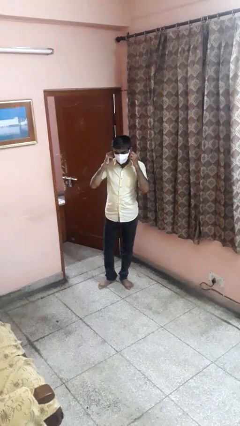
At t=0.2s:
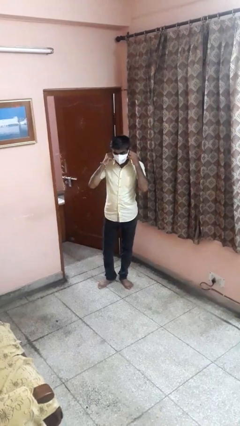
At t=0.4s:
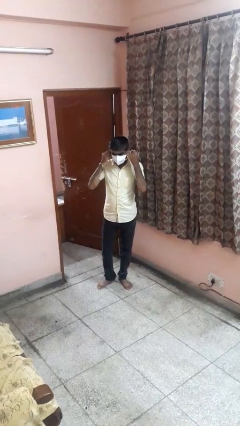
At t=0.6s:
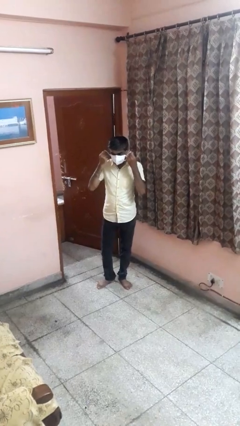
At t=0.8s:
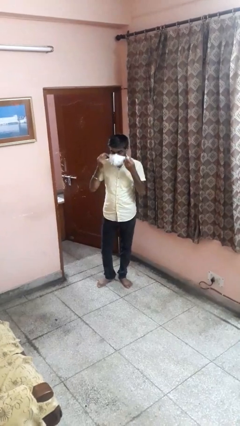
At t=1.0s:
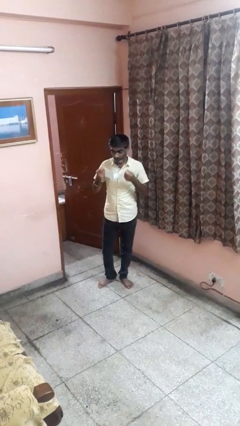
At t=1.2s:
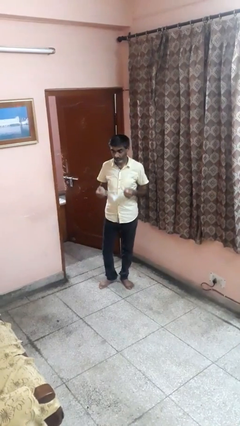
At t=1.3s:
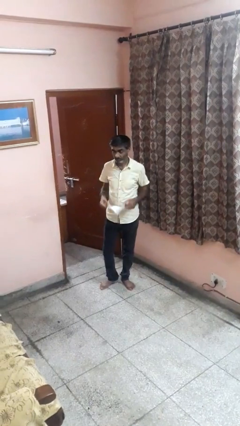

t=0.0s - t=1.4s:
person takes off facemask

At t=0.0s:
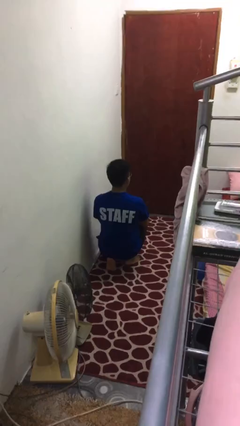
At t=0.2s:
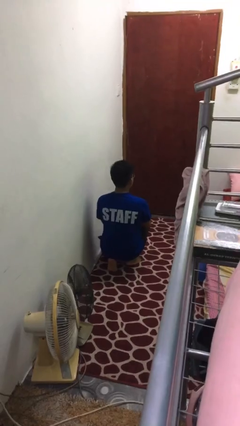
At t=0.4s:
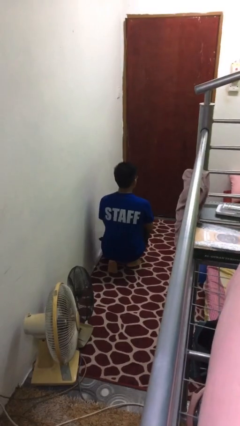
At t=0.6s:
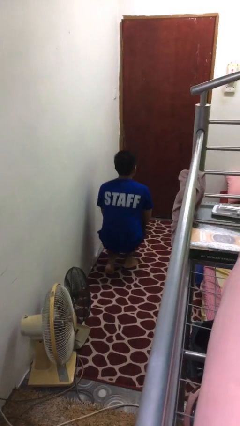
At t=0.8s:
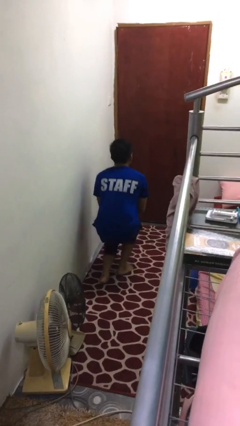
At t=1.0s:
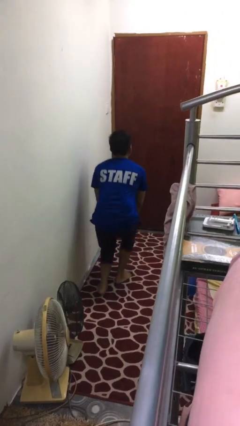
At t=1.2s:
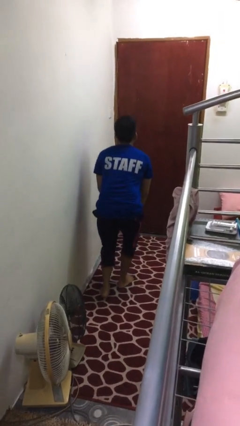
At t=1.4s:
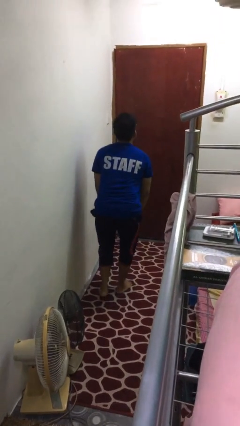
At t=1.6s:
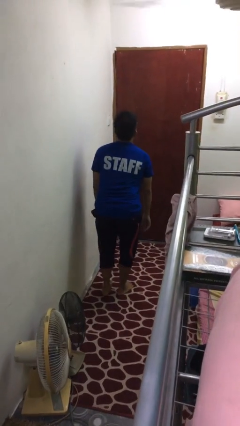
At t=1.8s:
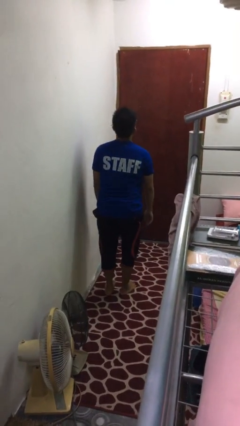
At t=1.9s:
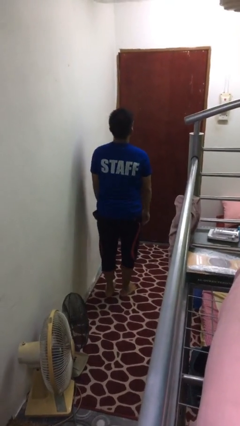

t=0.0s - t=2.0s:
person stands up from floor

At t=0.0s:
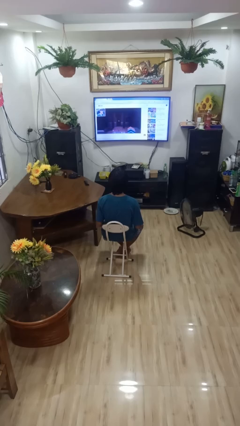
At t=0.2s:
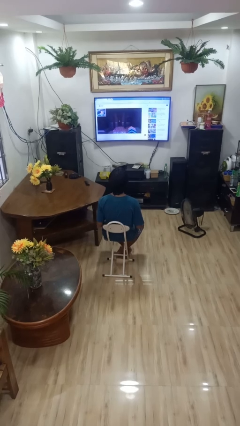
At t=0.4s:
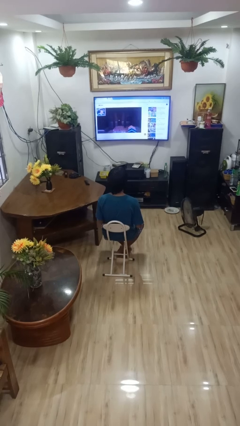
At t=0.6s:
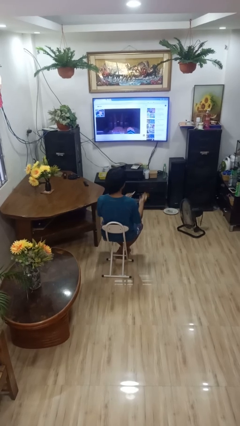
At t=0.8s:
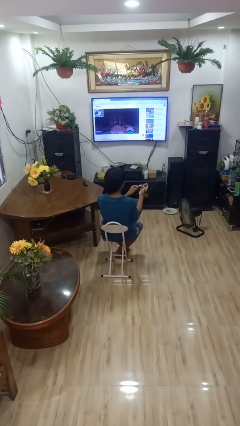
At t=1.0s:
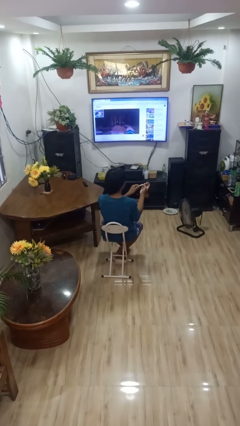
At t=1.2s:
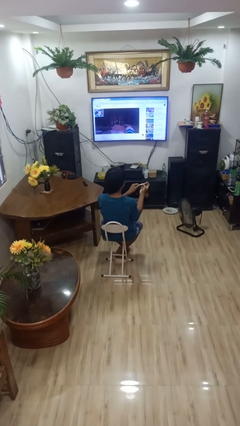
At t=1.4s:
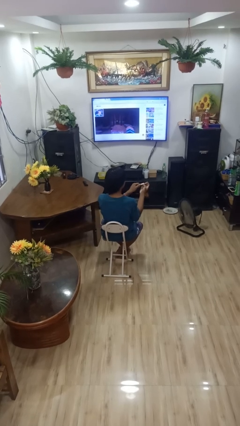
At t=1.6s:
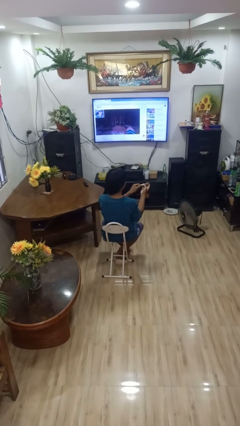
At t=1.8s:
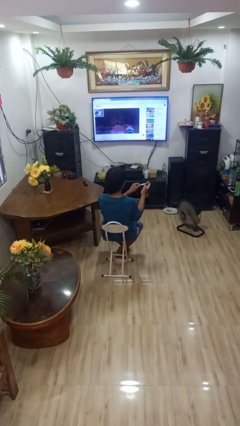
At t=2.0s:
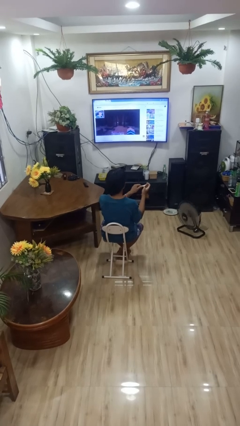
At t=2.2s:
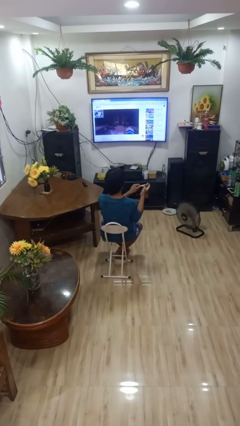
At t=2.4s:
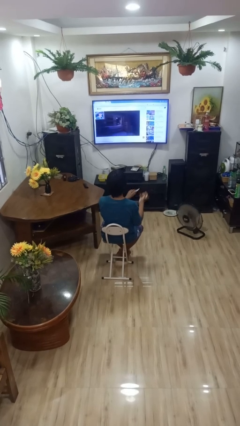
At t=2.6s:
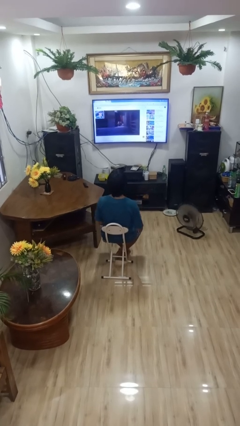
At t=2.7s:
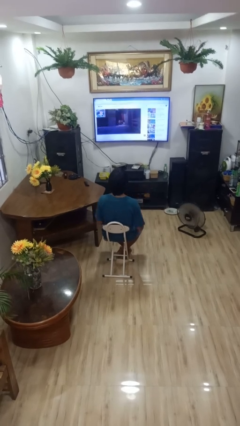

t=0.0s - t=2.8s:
person files fingernails

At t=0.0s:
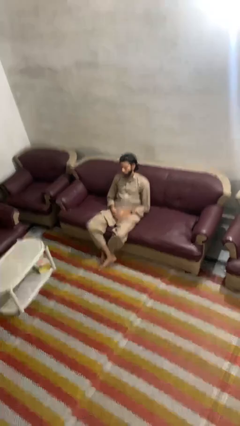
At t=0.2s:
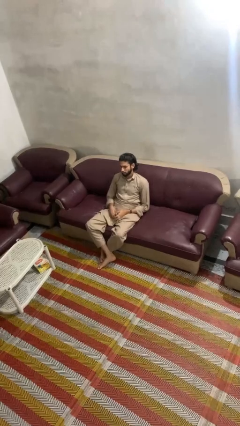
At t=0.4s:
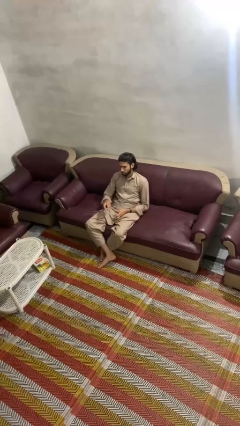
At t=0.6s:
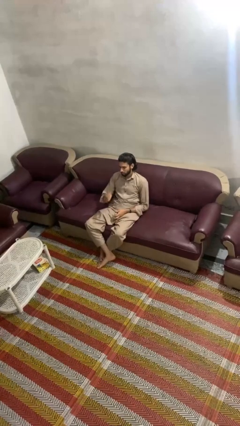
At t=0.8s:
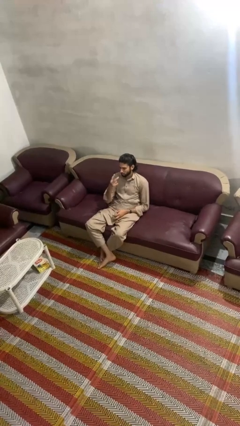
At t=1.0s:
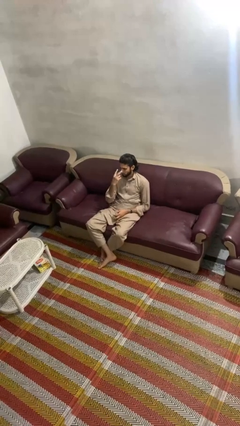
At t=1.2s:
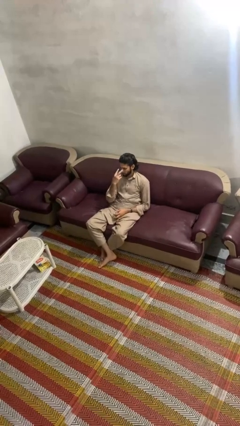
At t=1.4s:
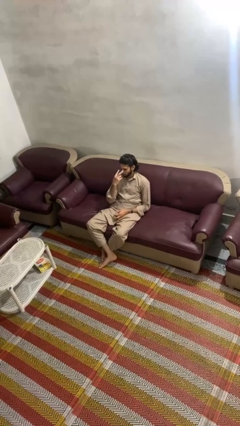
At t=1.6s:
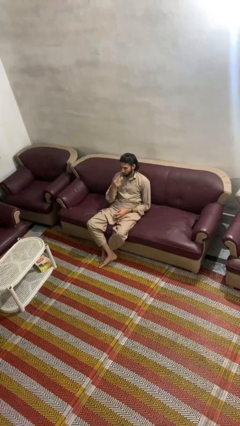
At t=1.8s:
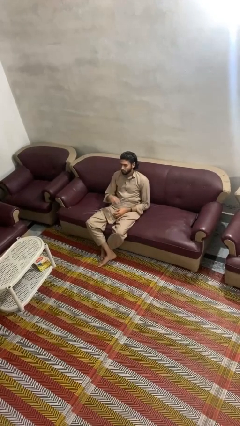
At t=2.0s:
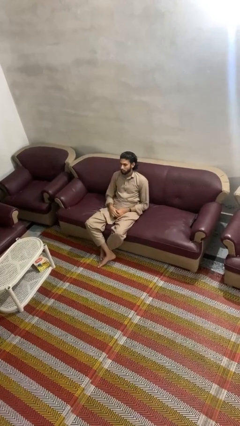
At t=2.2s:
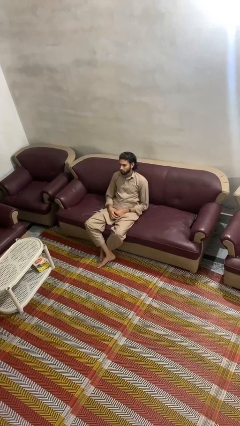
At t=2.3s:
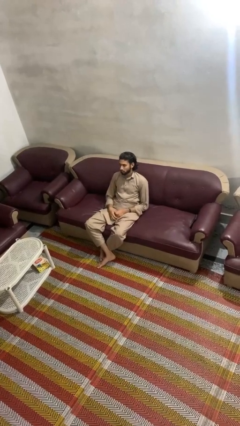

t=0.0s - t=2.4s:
person gestures watch closely

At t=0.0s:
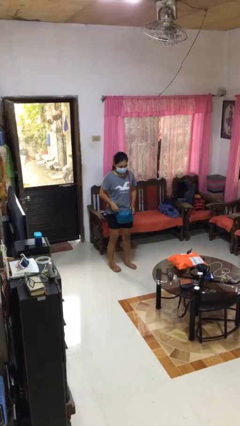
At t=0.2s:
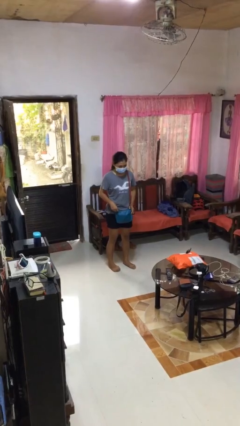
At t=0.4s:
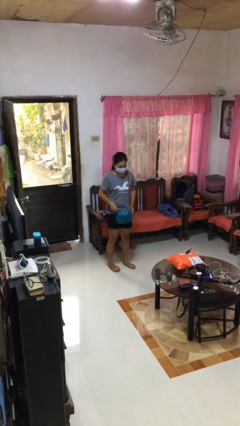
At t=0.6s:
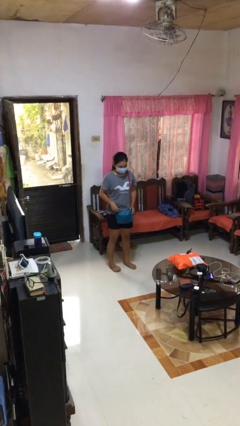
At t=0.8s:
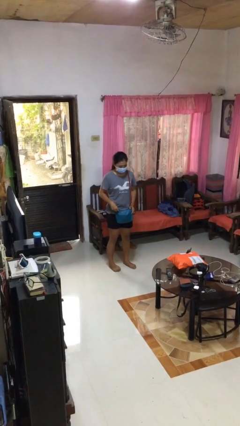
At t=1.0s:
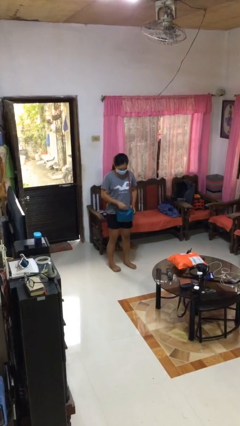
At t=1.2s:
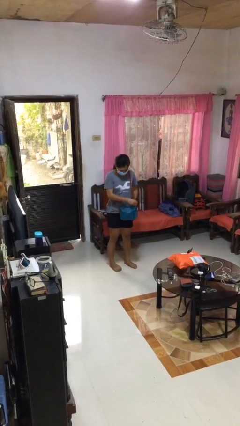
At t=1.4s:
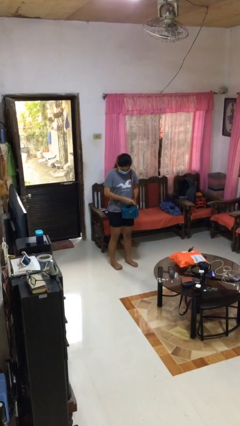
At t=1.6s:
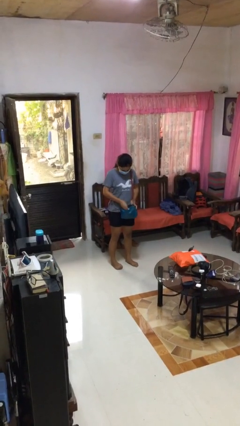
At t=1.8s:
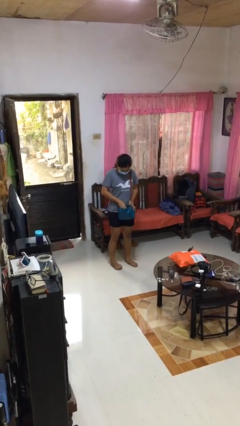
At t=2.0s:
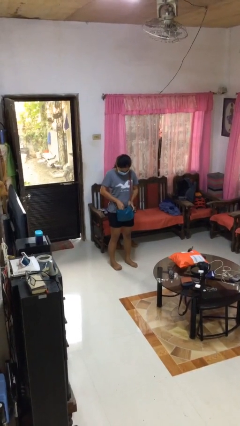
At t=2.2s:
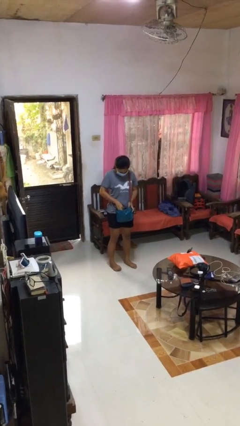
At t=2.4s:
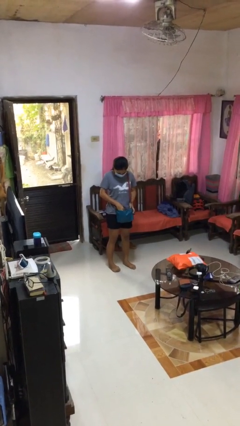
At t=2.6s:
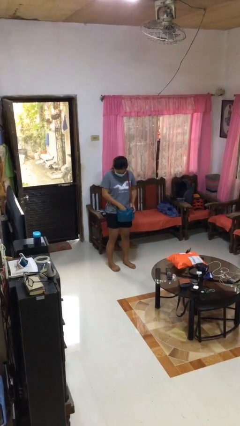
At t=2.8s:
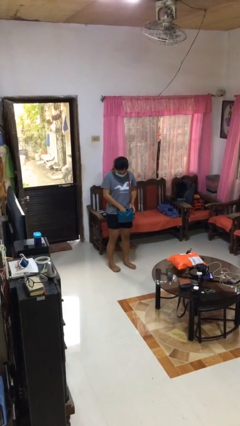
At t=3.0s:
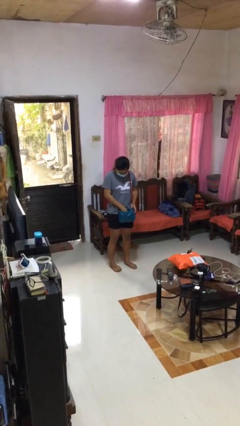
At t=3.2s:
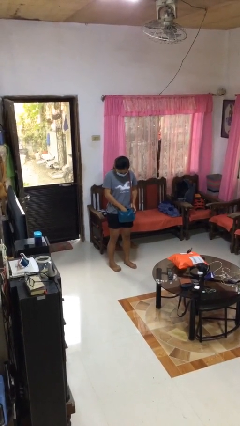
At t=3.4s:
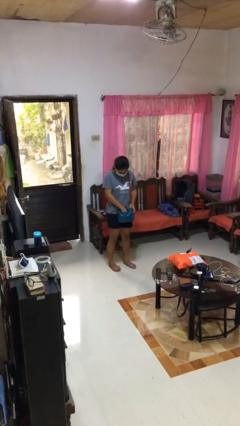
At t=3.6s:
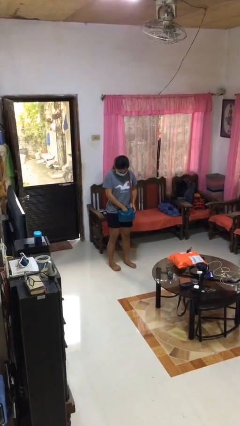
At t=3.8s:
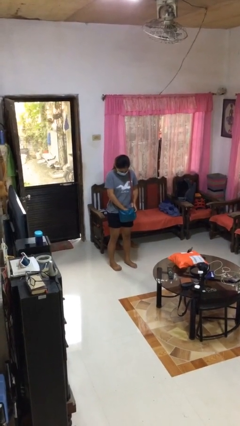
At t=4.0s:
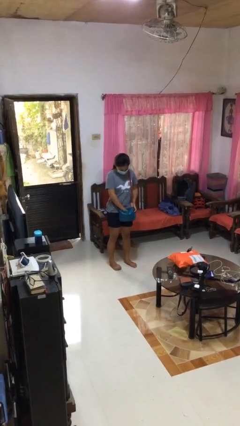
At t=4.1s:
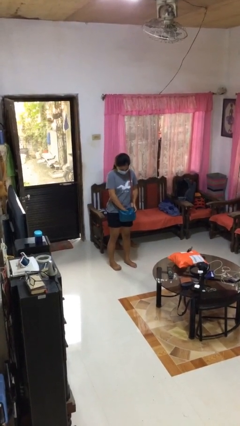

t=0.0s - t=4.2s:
person searches in purse

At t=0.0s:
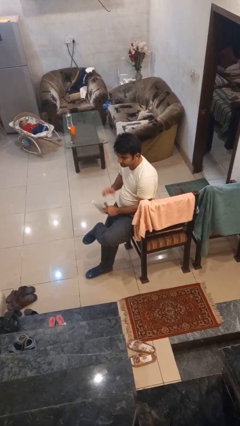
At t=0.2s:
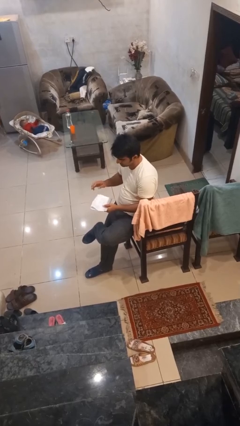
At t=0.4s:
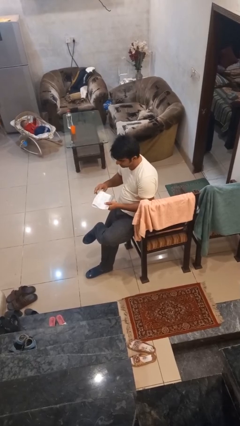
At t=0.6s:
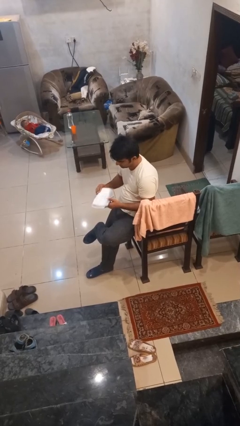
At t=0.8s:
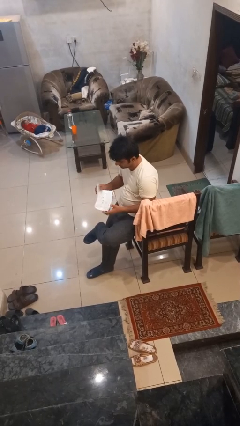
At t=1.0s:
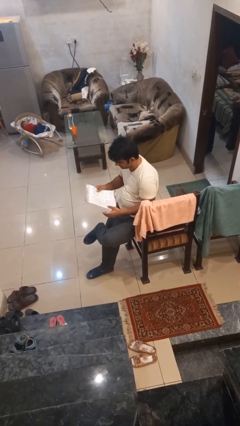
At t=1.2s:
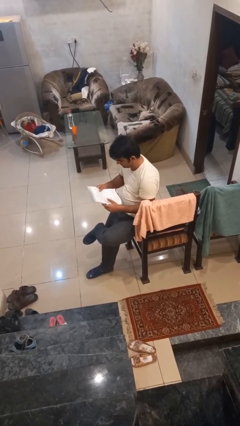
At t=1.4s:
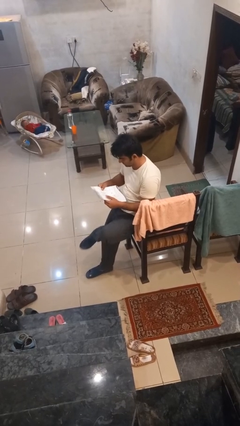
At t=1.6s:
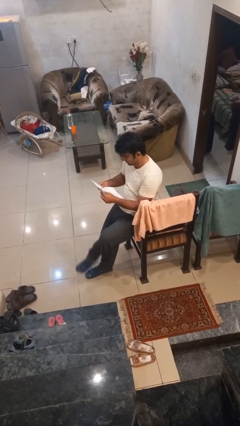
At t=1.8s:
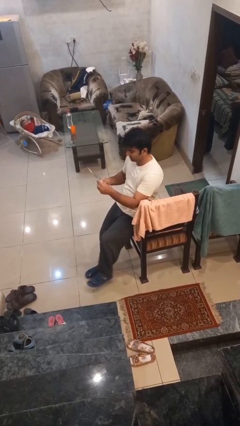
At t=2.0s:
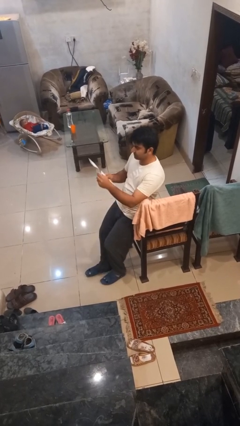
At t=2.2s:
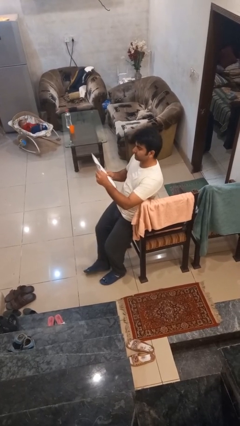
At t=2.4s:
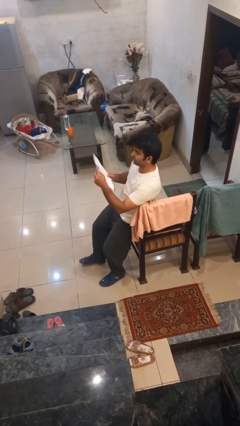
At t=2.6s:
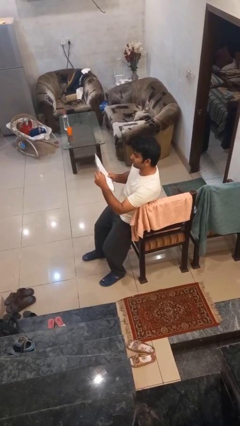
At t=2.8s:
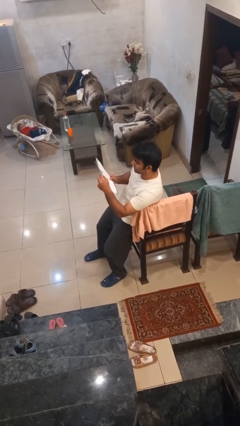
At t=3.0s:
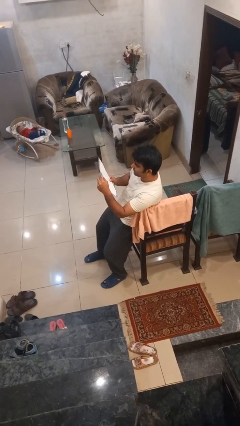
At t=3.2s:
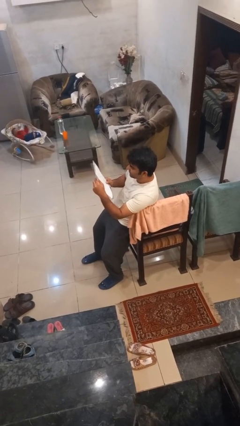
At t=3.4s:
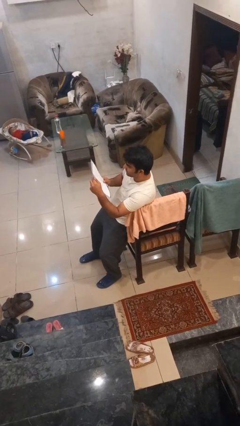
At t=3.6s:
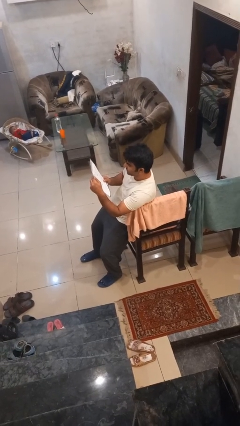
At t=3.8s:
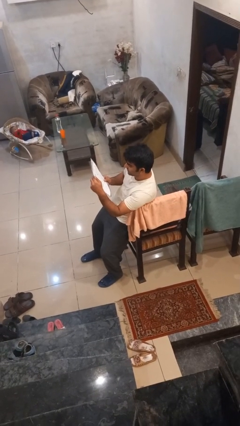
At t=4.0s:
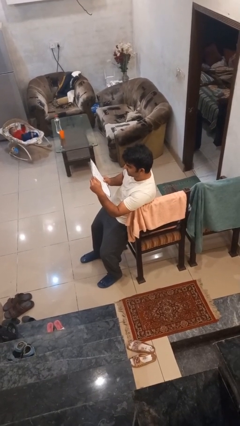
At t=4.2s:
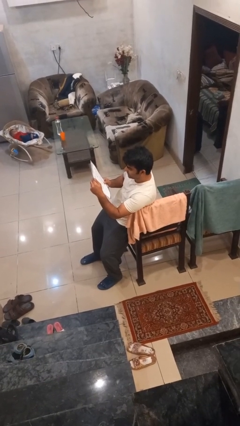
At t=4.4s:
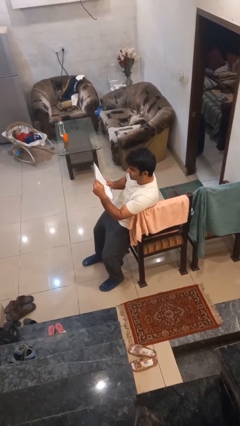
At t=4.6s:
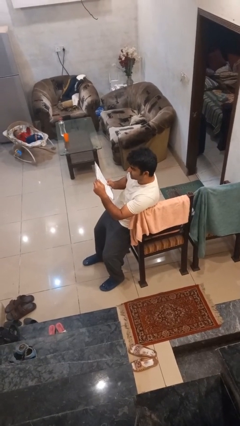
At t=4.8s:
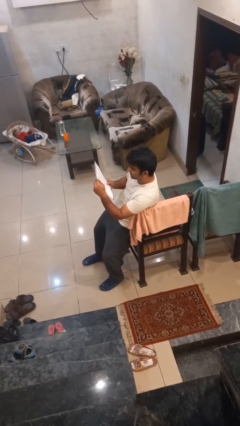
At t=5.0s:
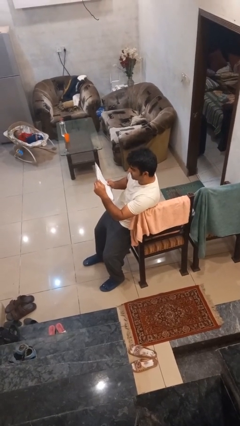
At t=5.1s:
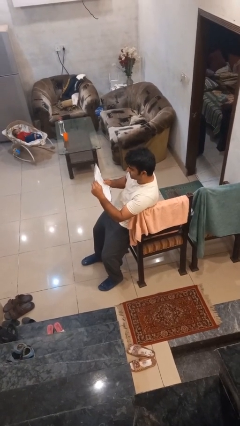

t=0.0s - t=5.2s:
person reads document
